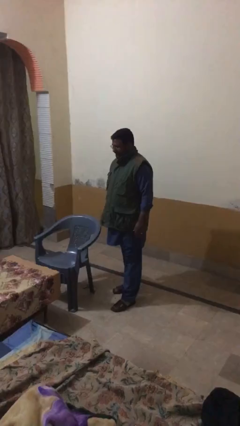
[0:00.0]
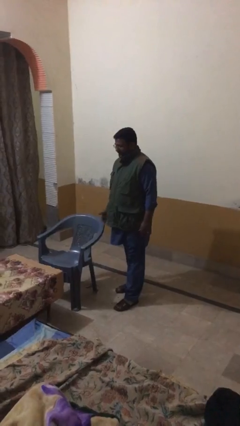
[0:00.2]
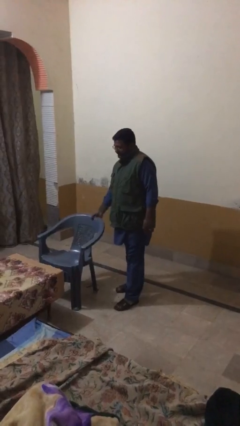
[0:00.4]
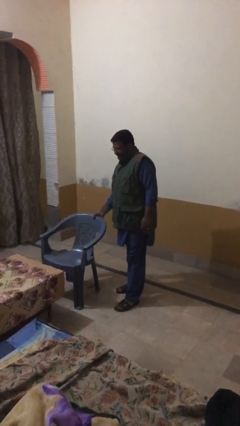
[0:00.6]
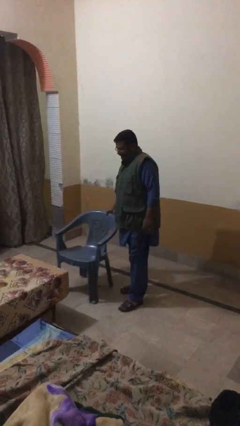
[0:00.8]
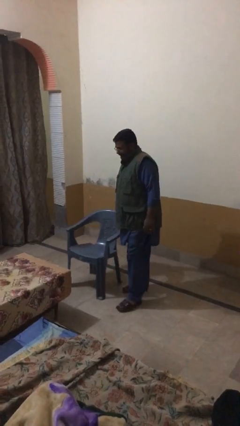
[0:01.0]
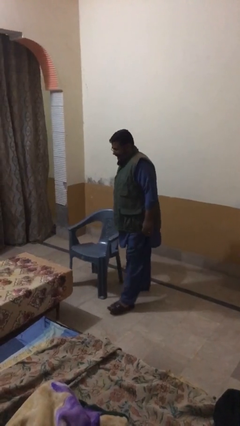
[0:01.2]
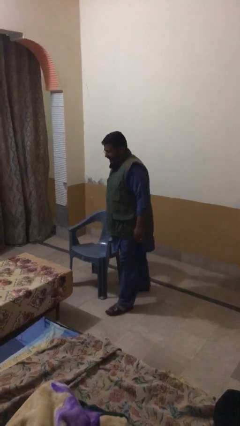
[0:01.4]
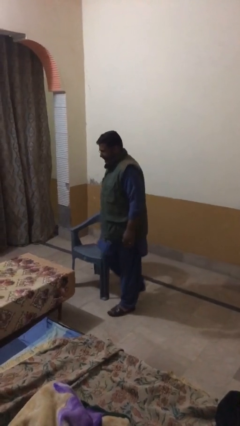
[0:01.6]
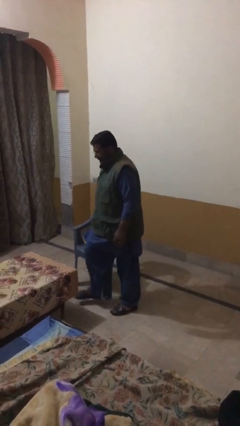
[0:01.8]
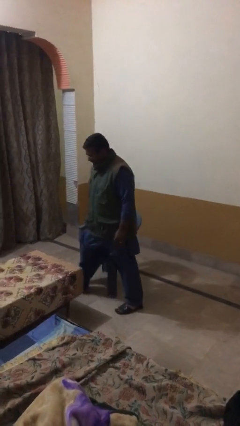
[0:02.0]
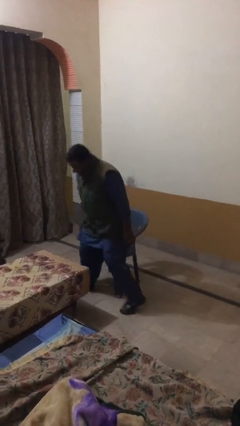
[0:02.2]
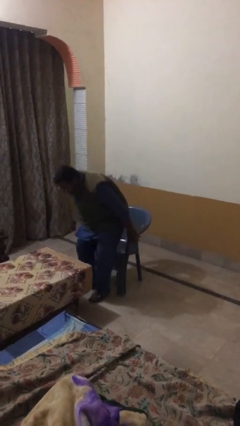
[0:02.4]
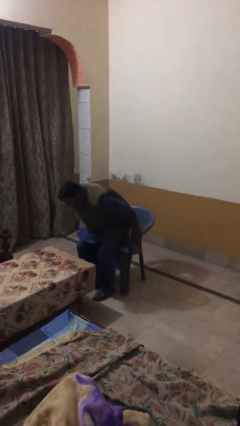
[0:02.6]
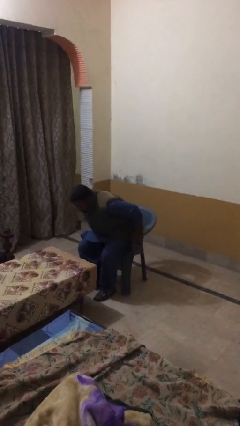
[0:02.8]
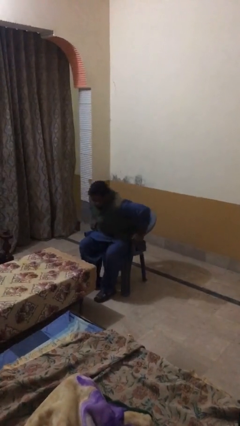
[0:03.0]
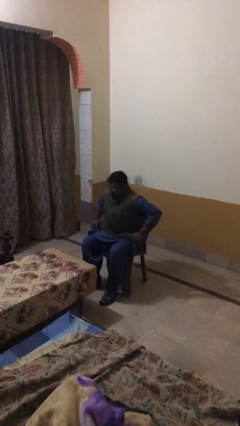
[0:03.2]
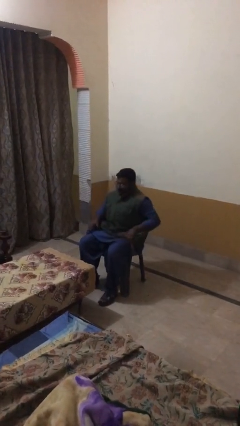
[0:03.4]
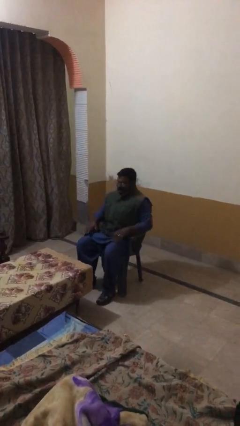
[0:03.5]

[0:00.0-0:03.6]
person sits down

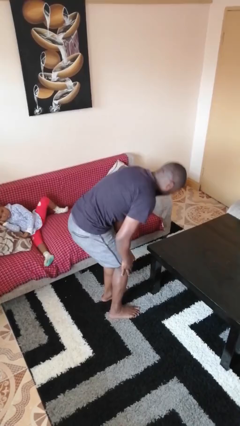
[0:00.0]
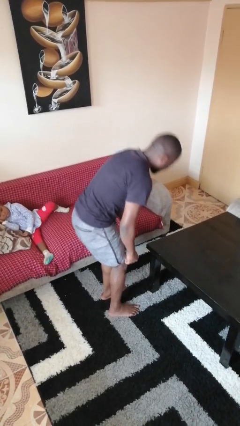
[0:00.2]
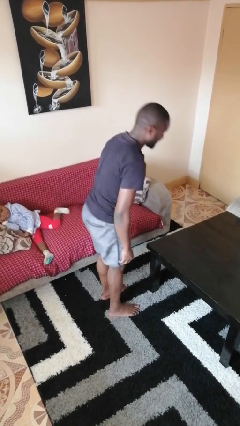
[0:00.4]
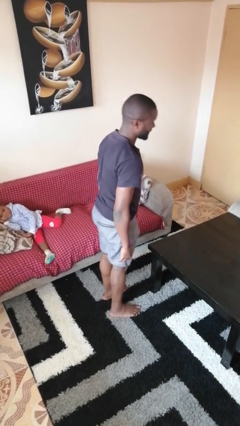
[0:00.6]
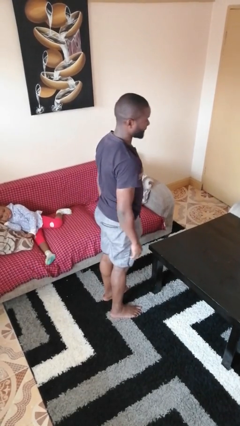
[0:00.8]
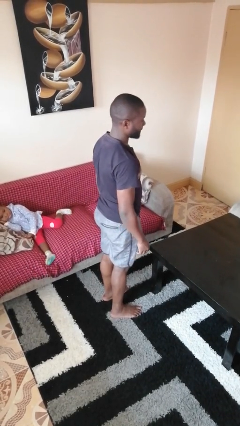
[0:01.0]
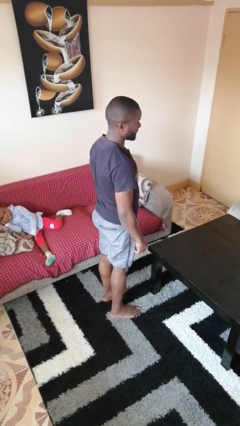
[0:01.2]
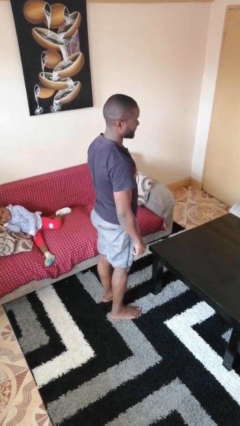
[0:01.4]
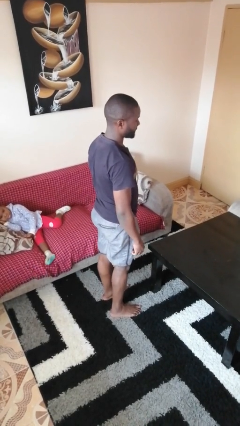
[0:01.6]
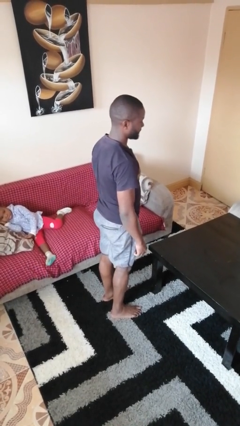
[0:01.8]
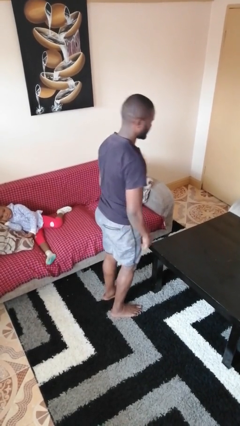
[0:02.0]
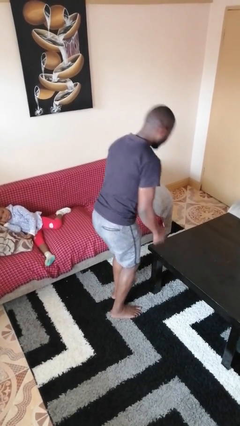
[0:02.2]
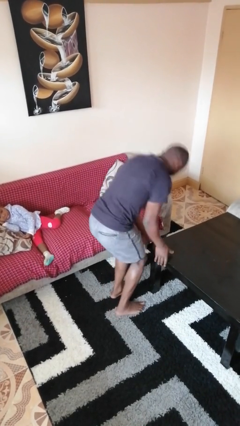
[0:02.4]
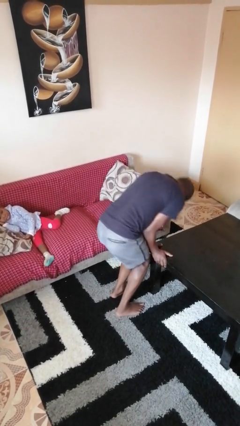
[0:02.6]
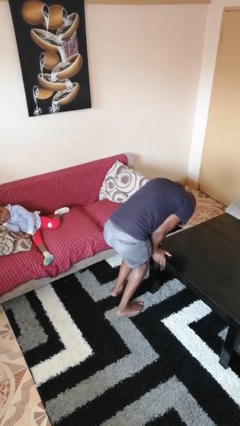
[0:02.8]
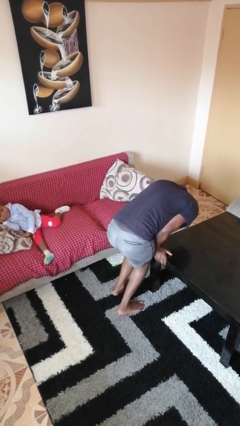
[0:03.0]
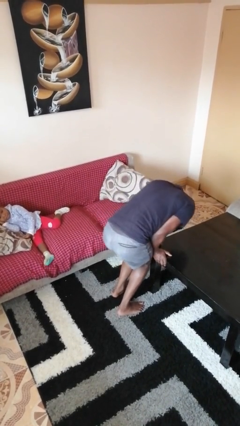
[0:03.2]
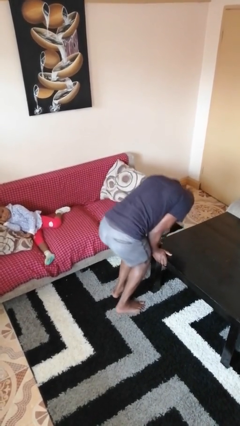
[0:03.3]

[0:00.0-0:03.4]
person bumps into table

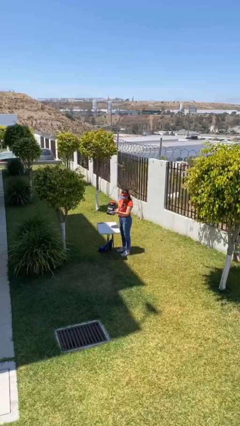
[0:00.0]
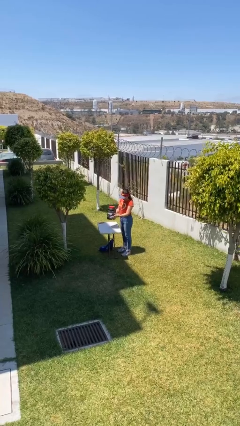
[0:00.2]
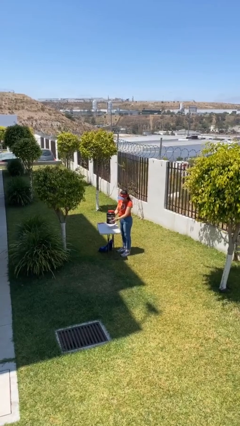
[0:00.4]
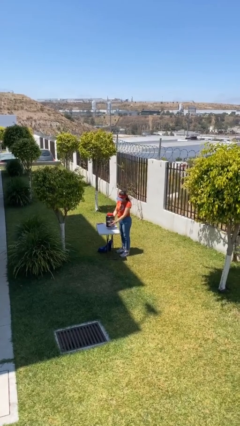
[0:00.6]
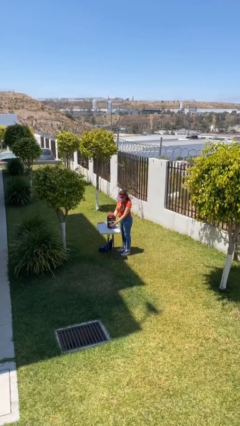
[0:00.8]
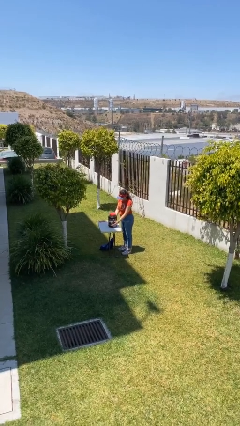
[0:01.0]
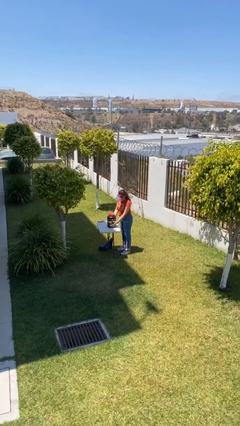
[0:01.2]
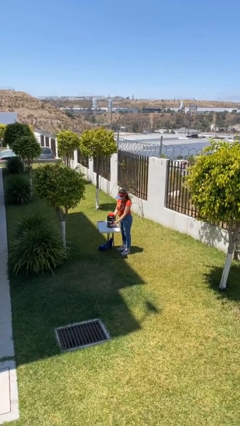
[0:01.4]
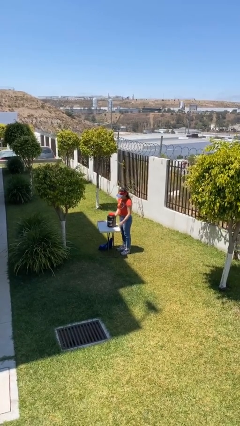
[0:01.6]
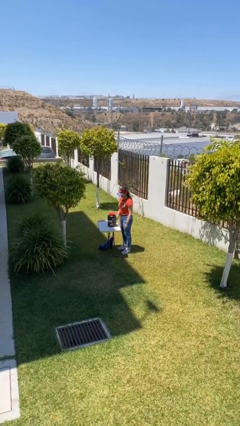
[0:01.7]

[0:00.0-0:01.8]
person puts down object on table

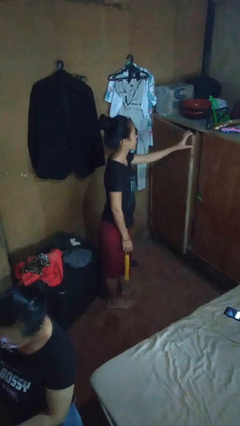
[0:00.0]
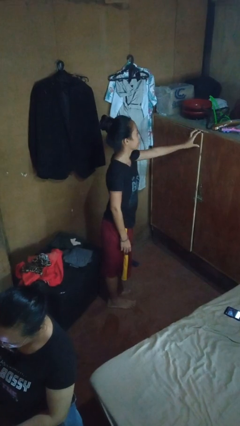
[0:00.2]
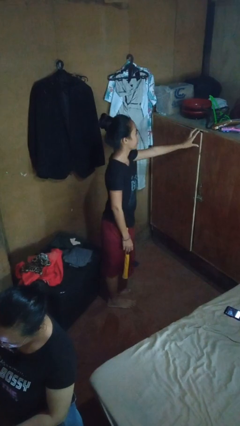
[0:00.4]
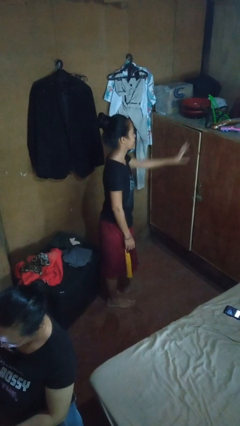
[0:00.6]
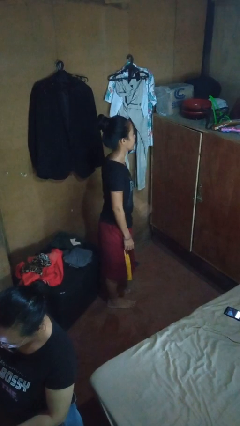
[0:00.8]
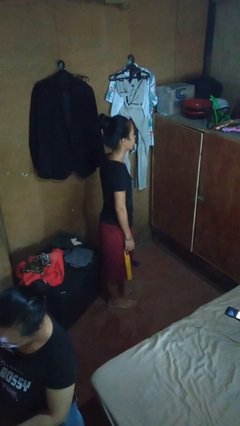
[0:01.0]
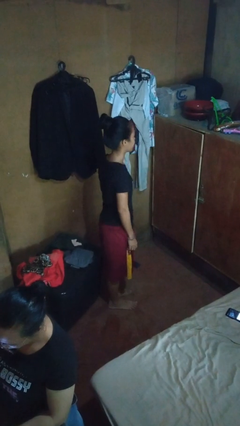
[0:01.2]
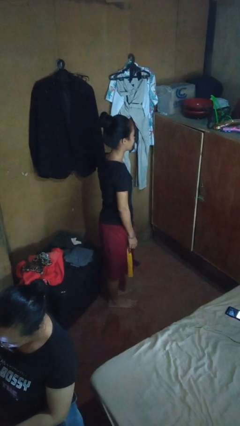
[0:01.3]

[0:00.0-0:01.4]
person closes closet door

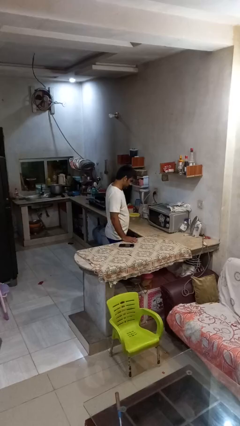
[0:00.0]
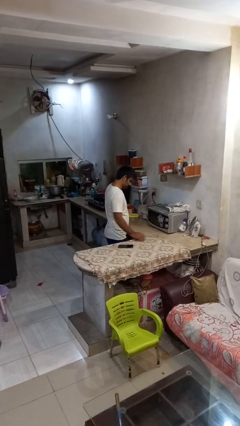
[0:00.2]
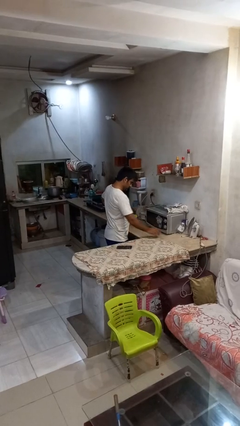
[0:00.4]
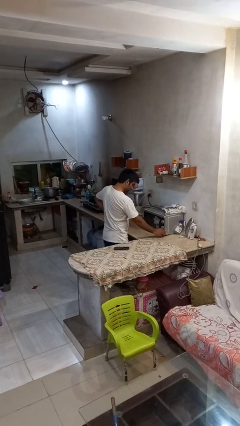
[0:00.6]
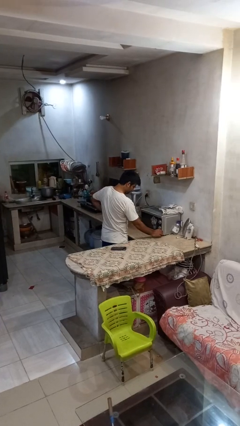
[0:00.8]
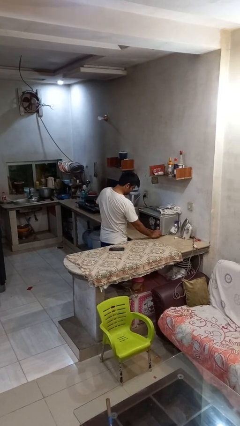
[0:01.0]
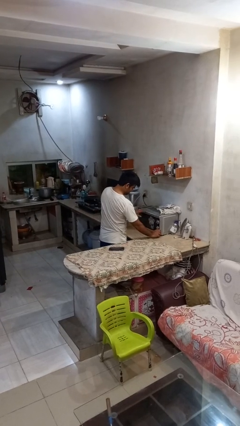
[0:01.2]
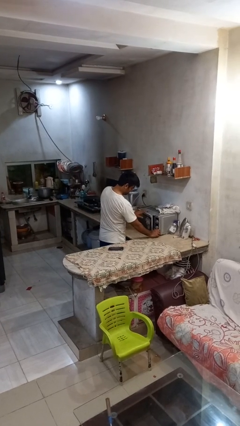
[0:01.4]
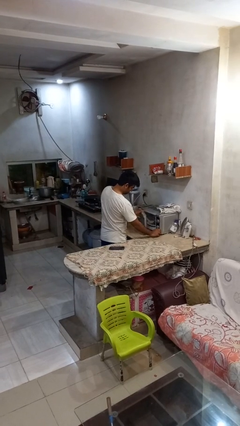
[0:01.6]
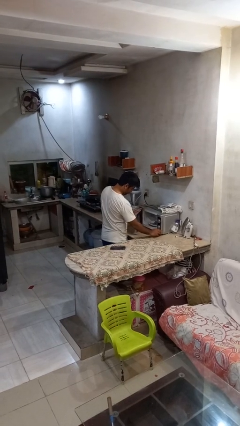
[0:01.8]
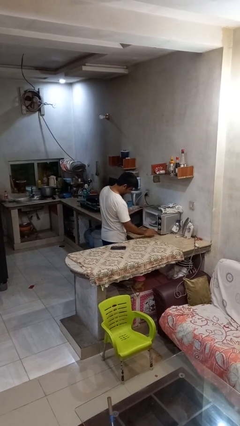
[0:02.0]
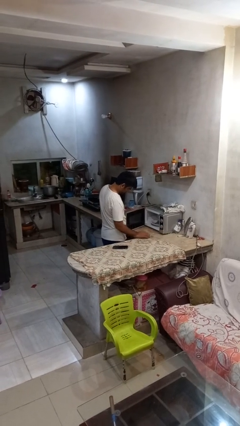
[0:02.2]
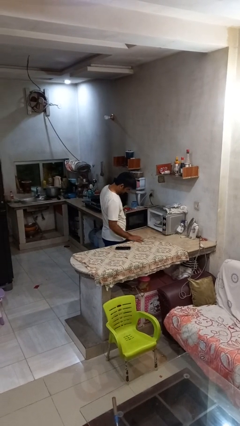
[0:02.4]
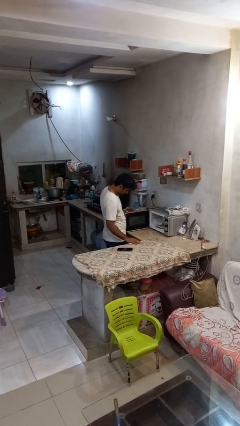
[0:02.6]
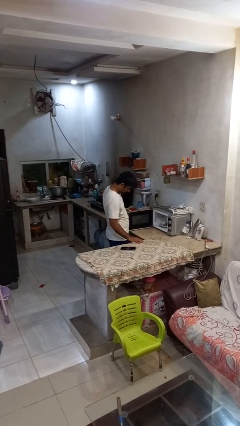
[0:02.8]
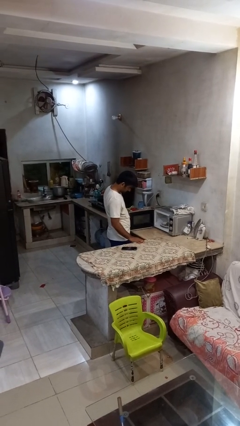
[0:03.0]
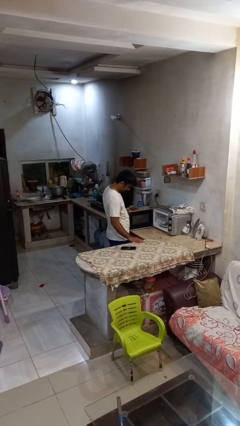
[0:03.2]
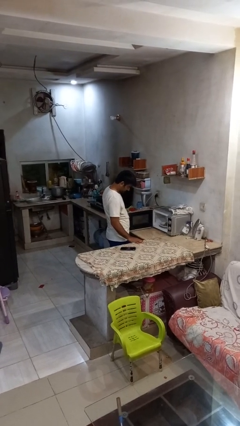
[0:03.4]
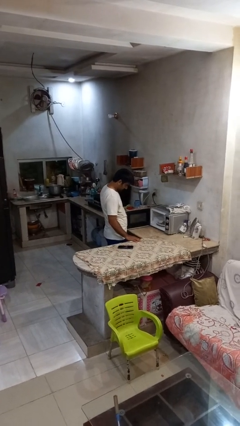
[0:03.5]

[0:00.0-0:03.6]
person opens microwave

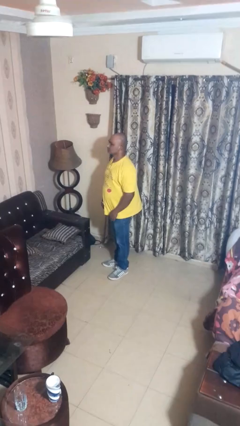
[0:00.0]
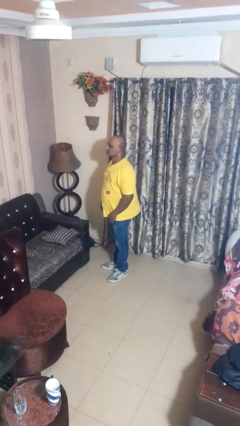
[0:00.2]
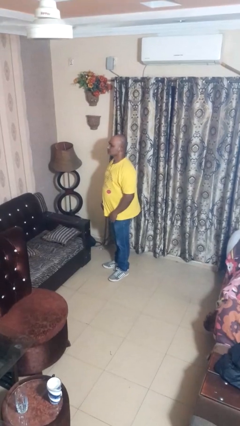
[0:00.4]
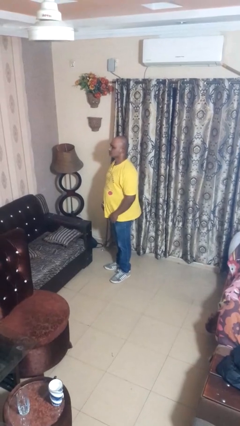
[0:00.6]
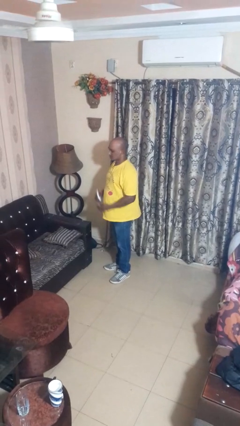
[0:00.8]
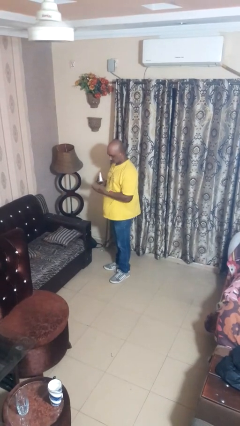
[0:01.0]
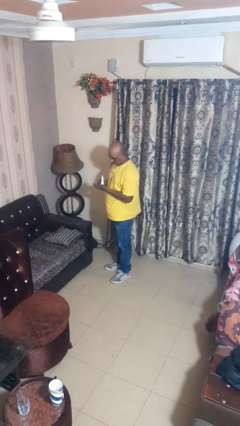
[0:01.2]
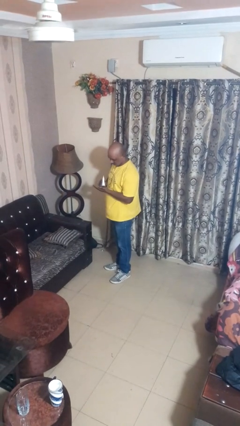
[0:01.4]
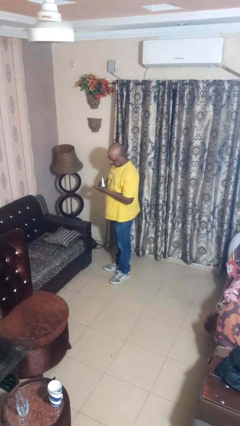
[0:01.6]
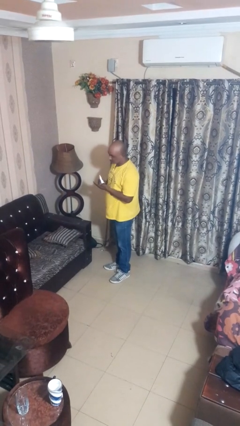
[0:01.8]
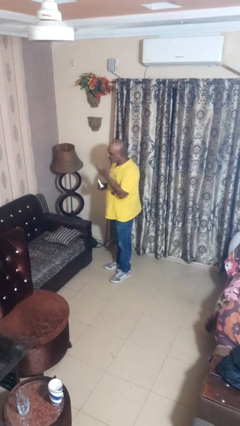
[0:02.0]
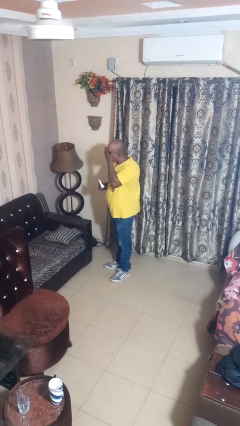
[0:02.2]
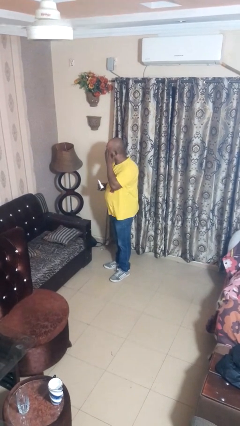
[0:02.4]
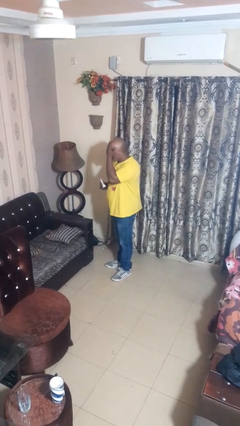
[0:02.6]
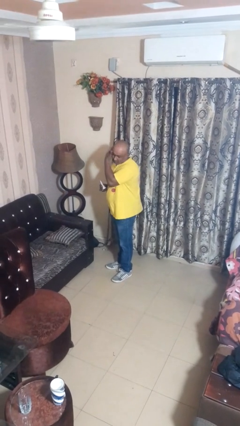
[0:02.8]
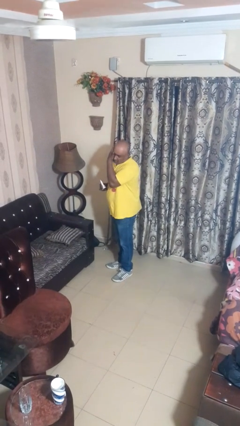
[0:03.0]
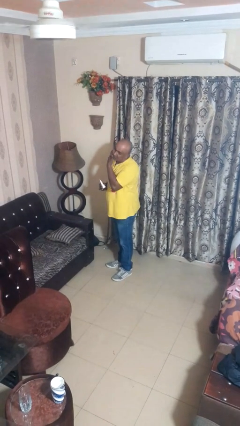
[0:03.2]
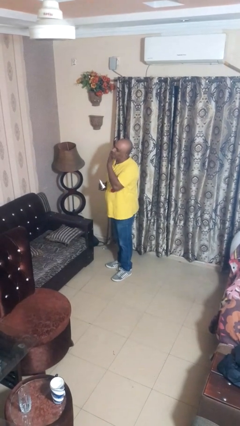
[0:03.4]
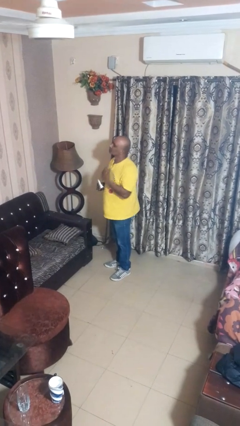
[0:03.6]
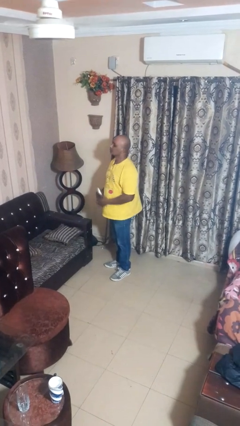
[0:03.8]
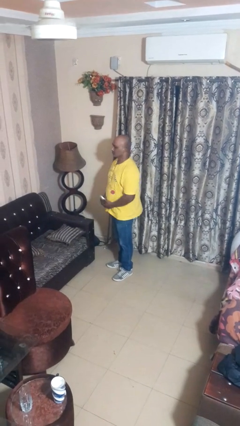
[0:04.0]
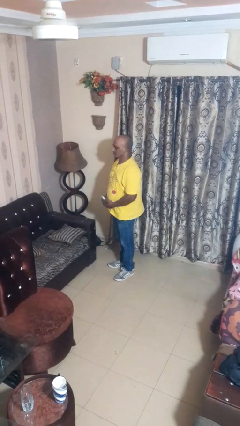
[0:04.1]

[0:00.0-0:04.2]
person applies facial moisturizer
